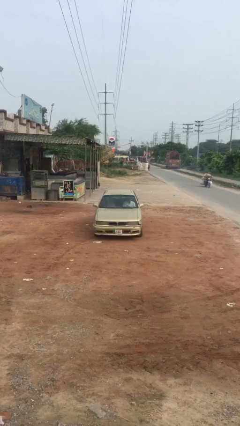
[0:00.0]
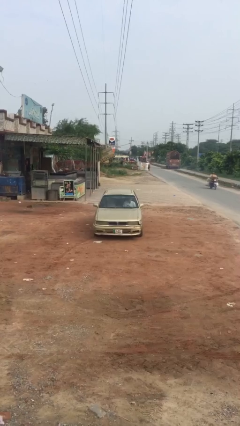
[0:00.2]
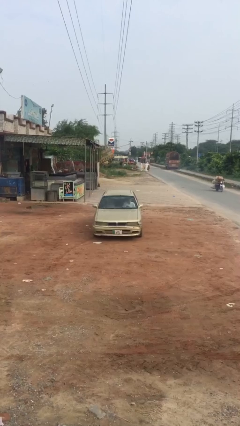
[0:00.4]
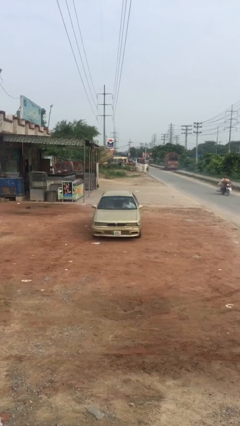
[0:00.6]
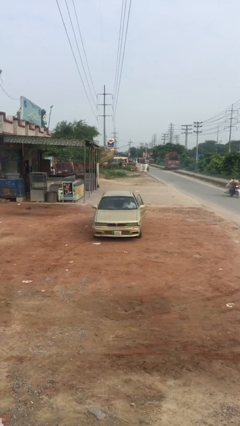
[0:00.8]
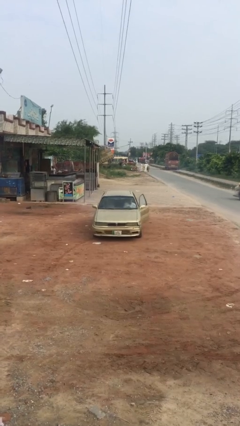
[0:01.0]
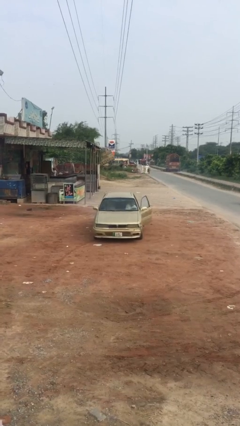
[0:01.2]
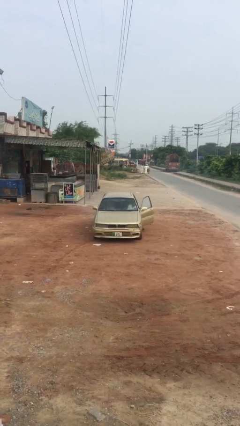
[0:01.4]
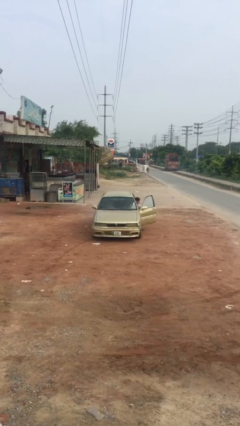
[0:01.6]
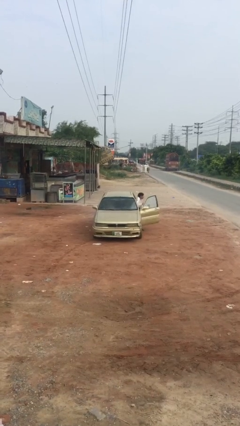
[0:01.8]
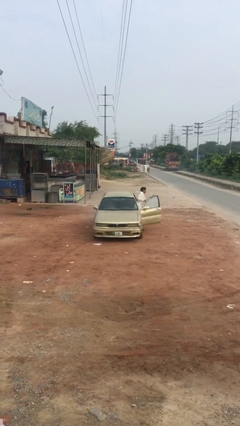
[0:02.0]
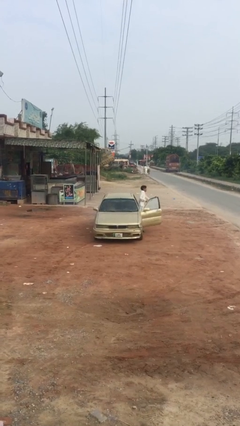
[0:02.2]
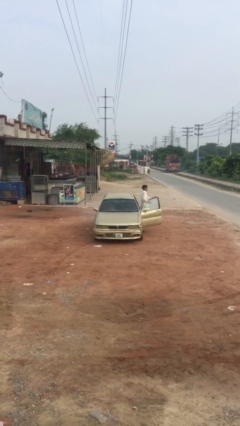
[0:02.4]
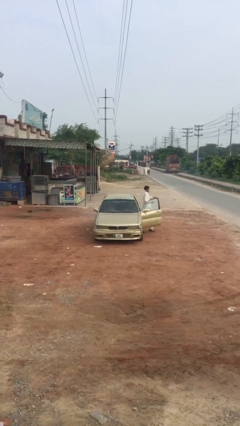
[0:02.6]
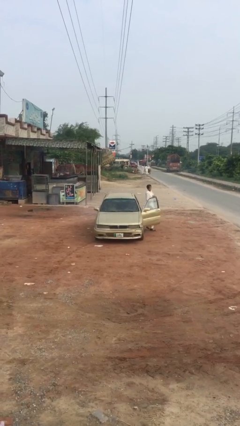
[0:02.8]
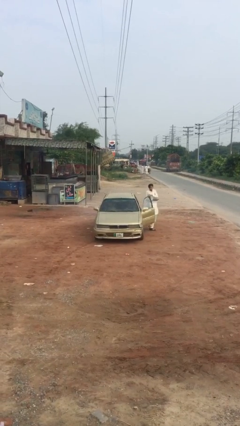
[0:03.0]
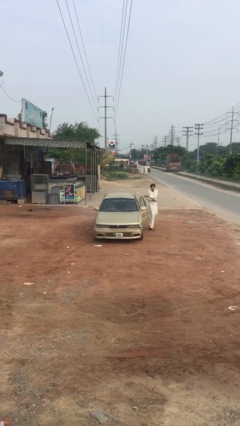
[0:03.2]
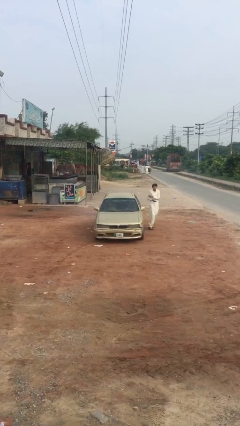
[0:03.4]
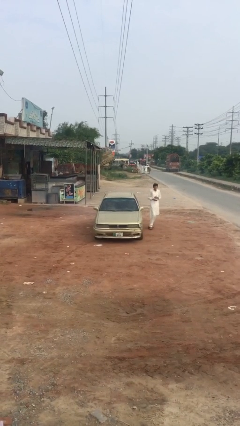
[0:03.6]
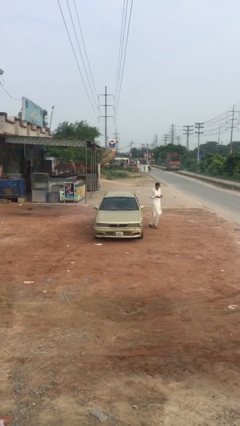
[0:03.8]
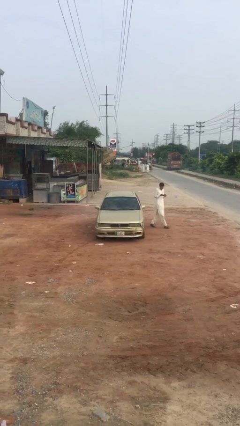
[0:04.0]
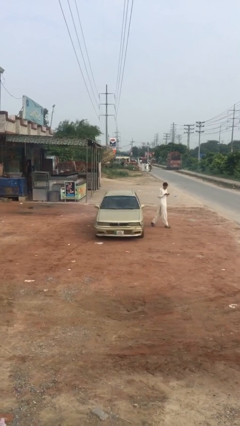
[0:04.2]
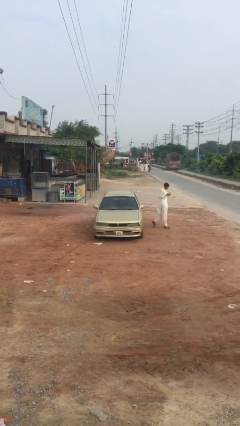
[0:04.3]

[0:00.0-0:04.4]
car drops off person

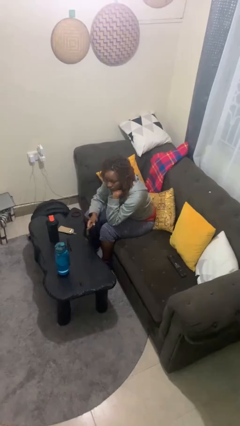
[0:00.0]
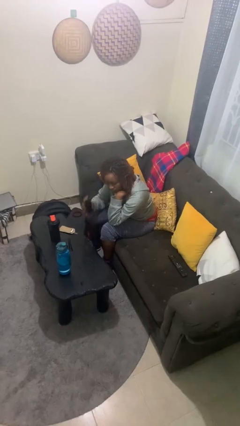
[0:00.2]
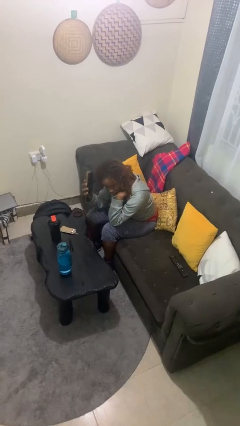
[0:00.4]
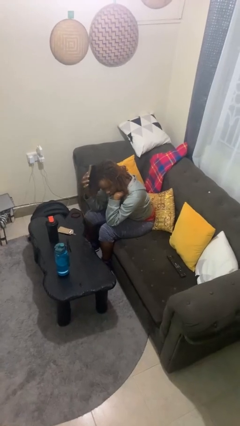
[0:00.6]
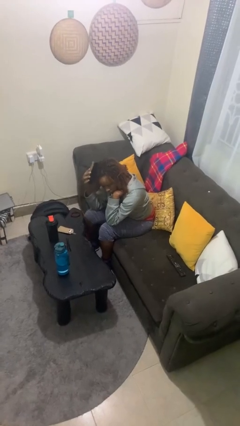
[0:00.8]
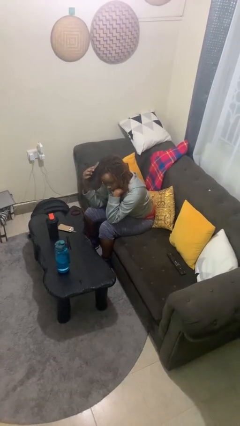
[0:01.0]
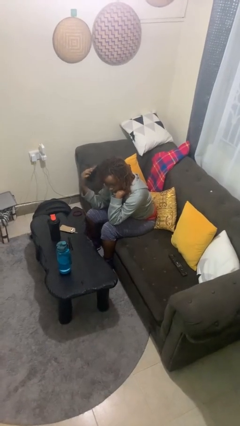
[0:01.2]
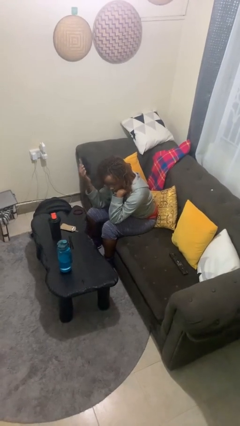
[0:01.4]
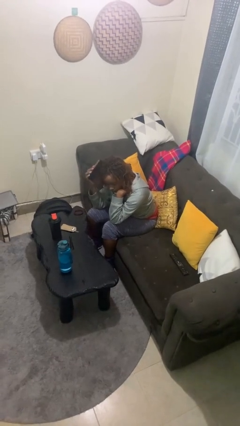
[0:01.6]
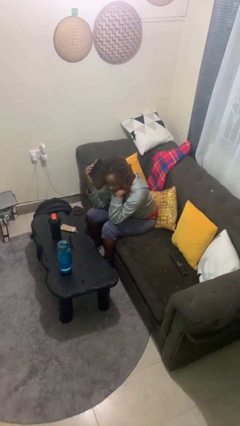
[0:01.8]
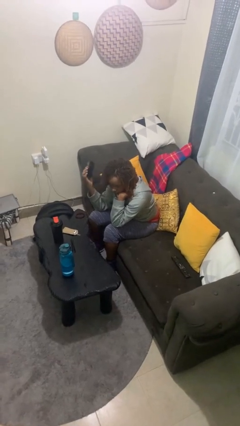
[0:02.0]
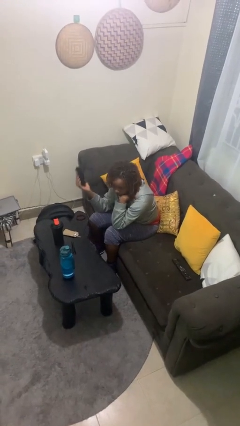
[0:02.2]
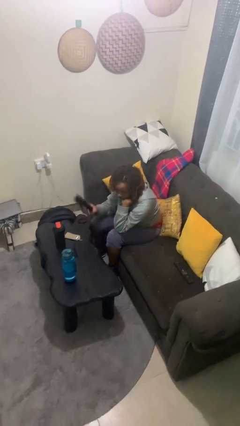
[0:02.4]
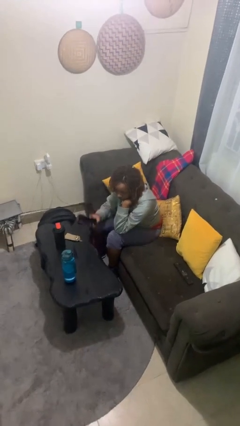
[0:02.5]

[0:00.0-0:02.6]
person brushes hair

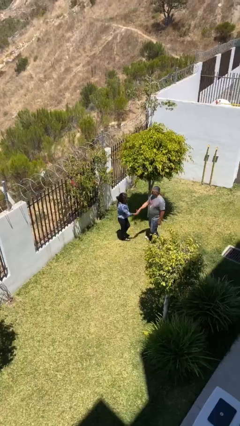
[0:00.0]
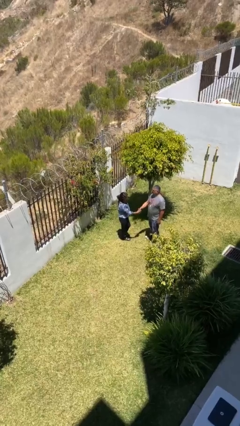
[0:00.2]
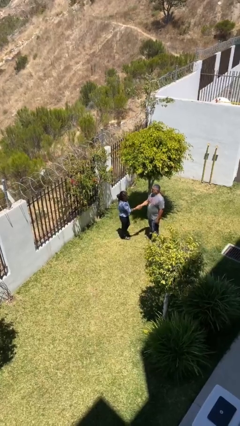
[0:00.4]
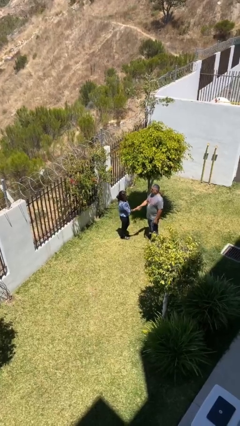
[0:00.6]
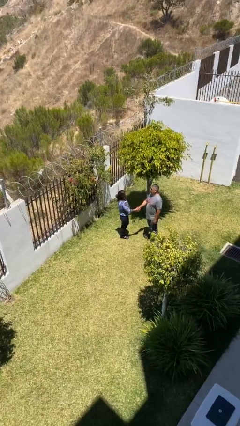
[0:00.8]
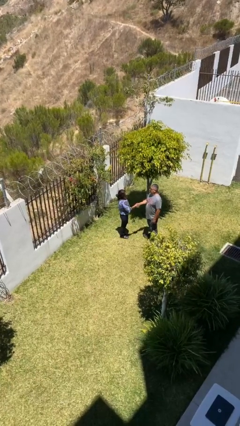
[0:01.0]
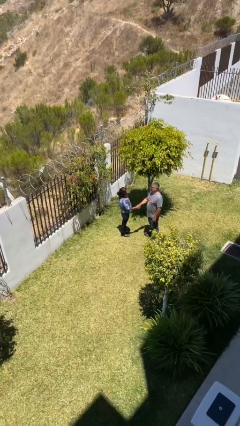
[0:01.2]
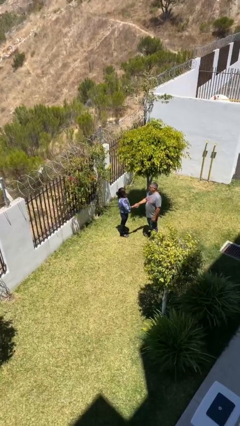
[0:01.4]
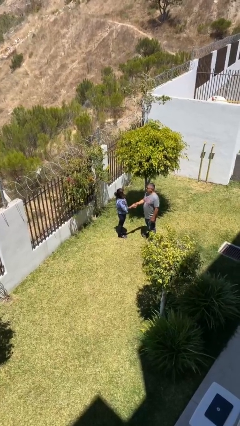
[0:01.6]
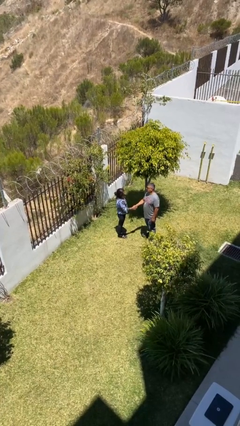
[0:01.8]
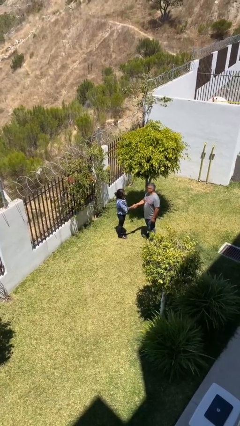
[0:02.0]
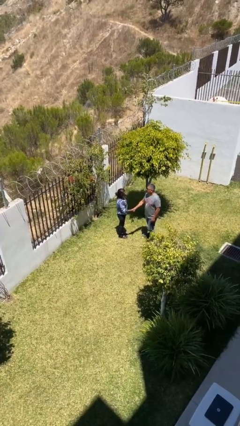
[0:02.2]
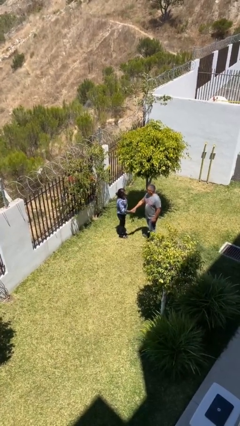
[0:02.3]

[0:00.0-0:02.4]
person shakes hand

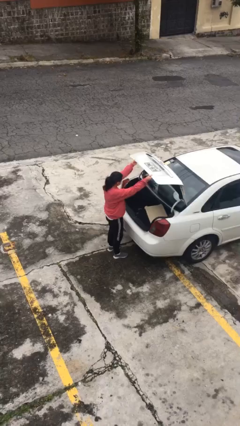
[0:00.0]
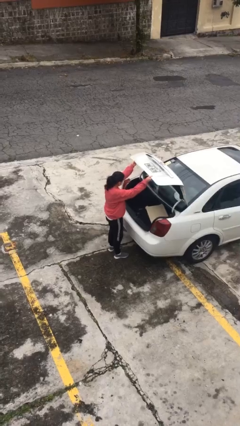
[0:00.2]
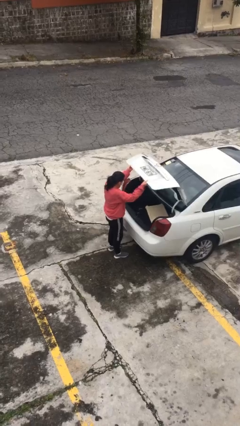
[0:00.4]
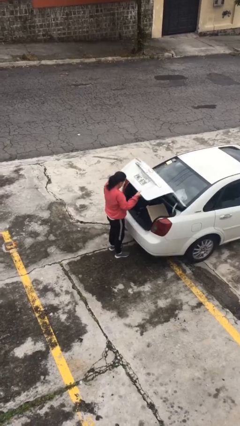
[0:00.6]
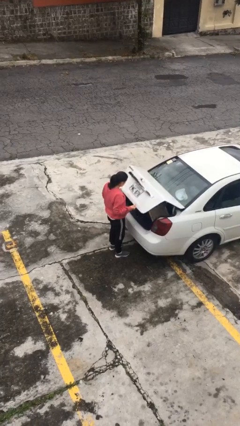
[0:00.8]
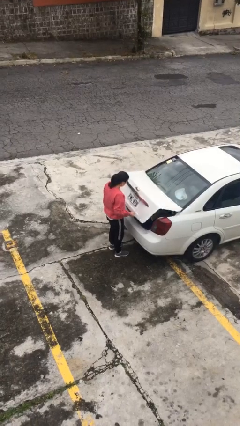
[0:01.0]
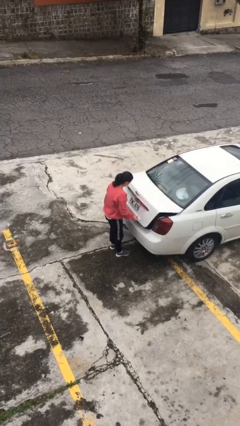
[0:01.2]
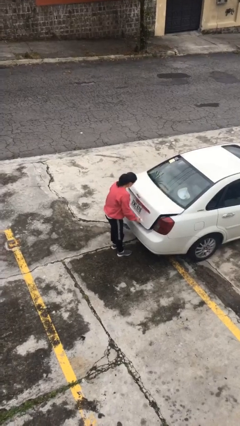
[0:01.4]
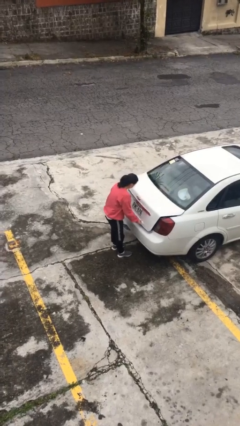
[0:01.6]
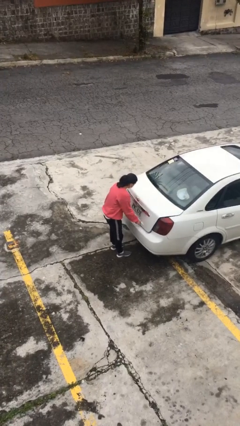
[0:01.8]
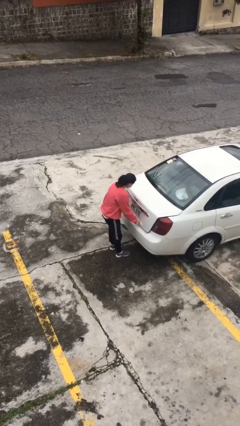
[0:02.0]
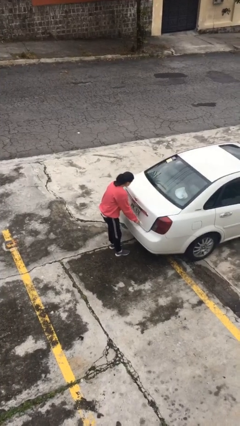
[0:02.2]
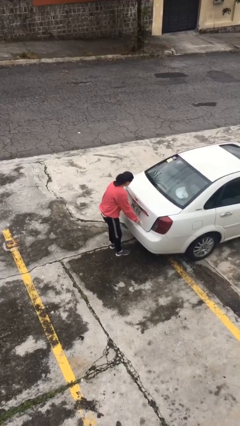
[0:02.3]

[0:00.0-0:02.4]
person closes car trunk

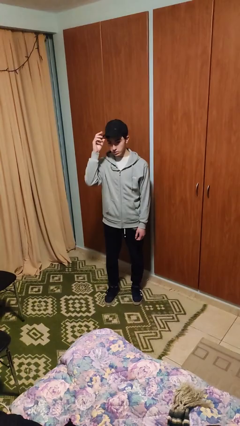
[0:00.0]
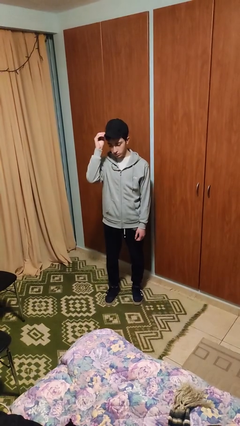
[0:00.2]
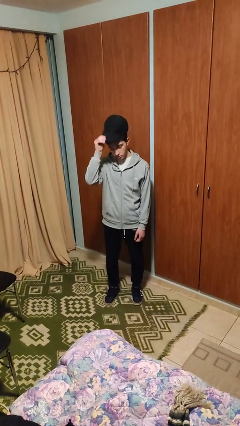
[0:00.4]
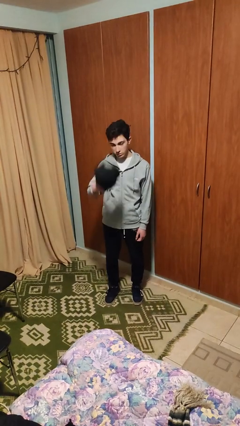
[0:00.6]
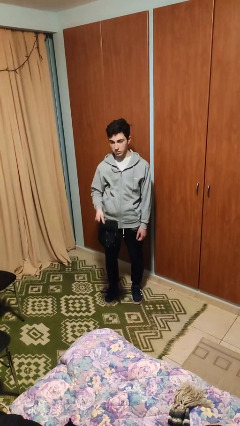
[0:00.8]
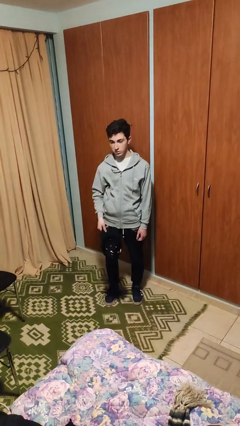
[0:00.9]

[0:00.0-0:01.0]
person takes off hat

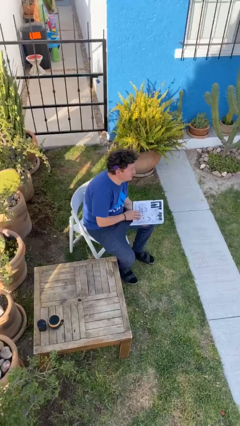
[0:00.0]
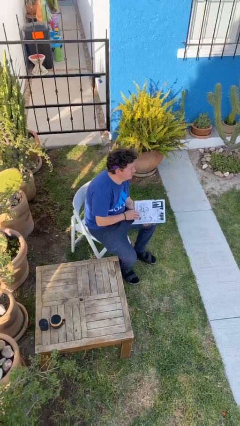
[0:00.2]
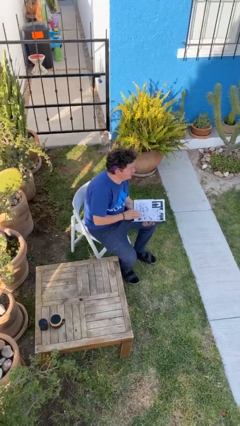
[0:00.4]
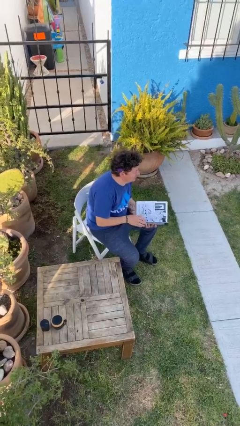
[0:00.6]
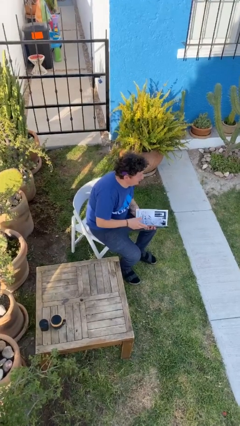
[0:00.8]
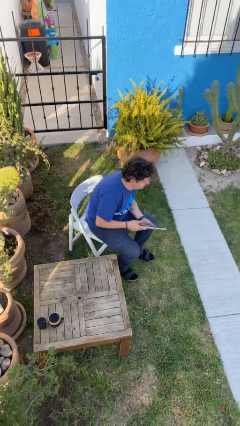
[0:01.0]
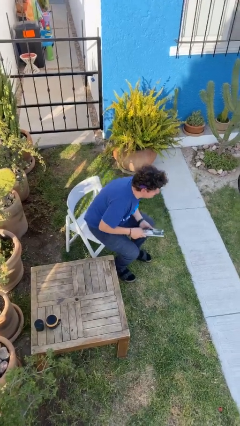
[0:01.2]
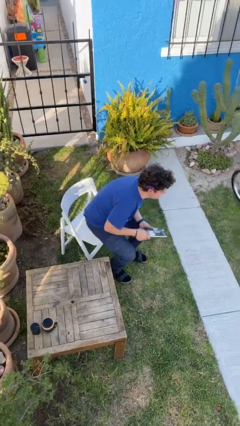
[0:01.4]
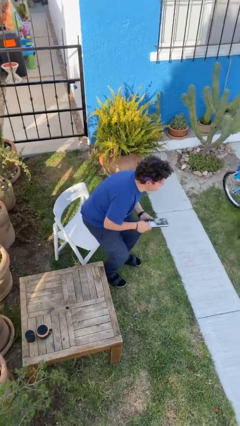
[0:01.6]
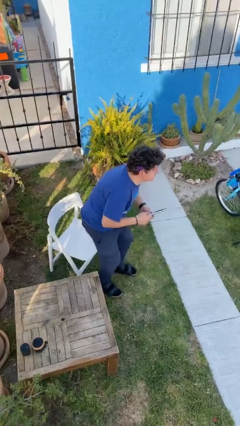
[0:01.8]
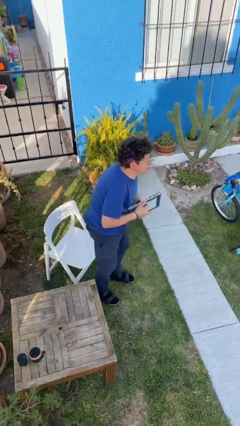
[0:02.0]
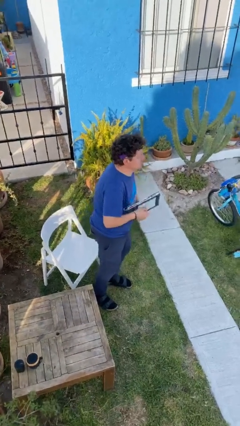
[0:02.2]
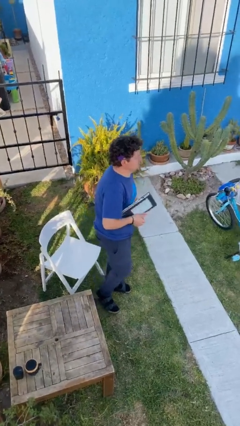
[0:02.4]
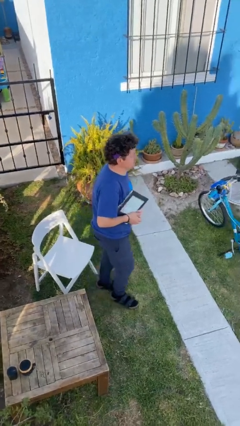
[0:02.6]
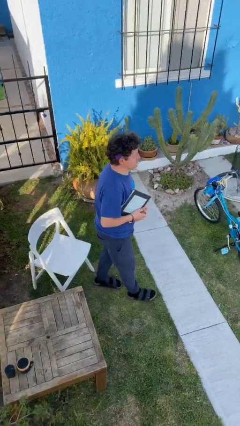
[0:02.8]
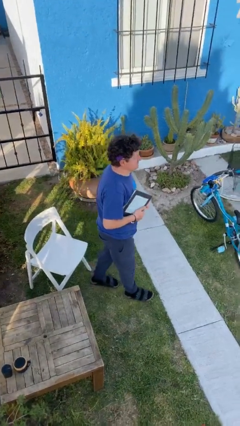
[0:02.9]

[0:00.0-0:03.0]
person stands up

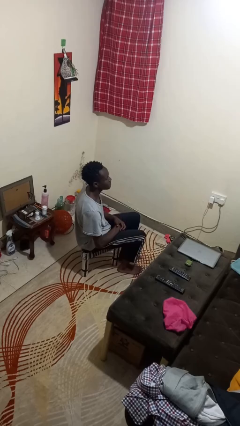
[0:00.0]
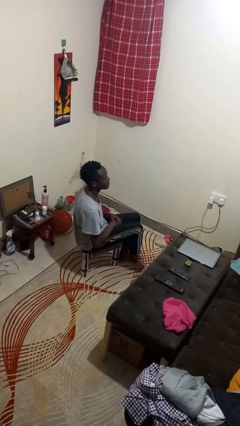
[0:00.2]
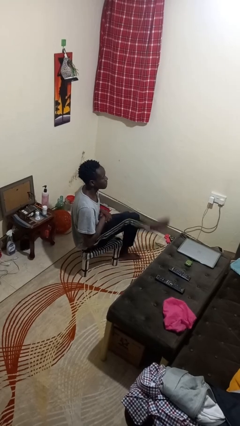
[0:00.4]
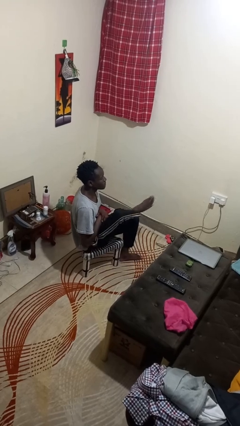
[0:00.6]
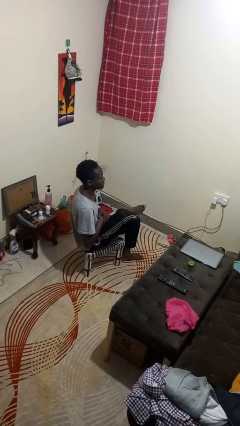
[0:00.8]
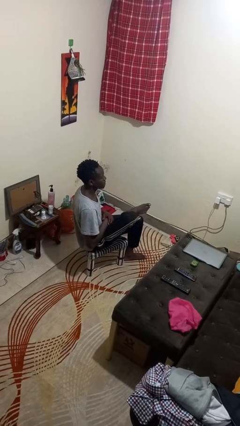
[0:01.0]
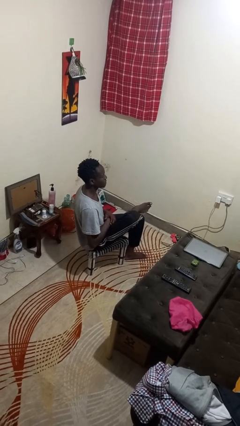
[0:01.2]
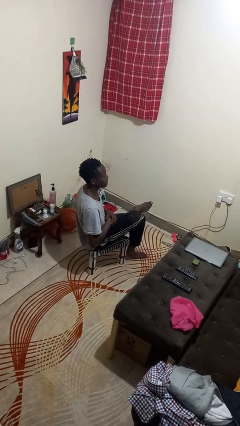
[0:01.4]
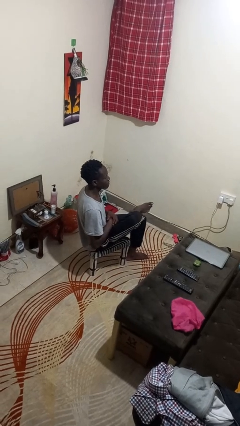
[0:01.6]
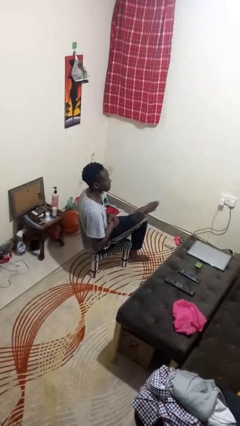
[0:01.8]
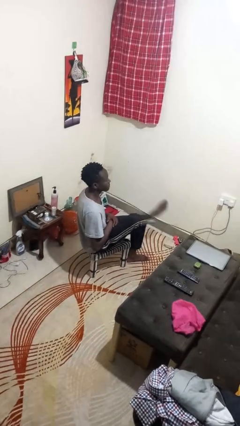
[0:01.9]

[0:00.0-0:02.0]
person crosses legs
